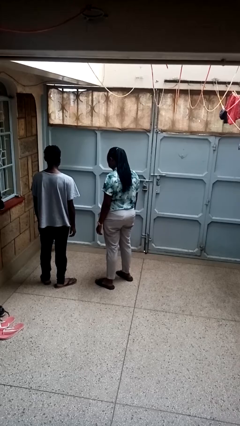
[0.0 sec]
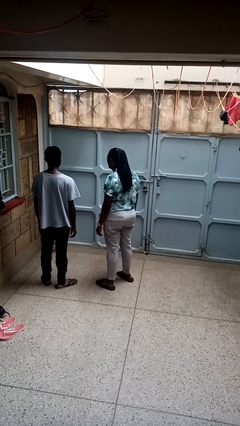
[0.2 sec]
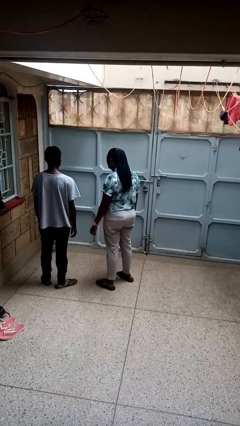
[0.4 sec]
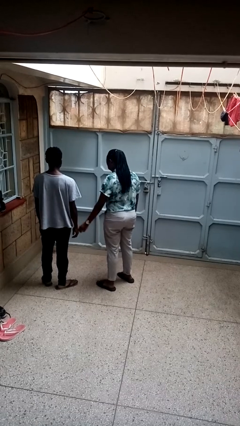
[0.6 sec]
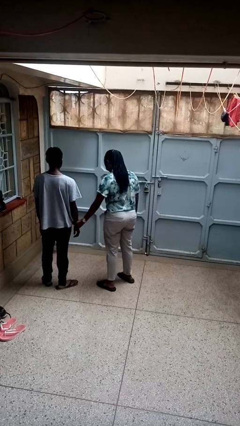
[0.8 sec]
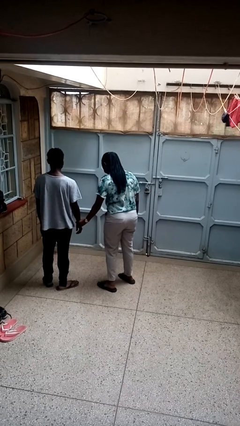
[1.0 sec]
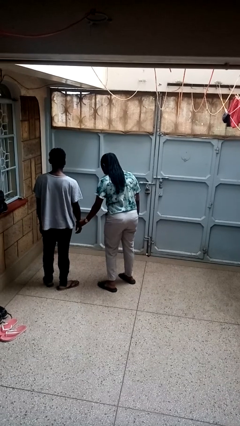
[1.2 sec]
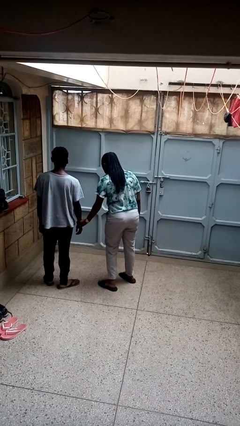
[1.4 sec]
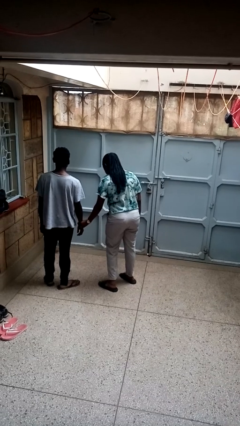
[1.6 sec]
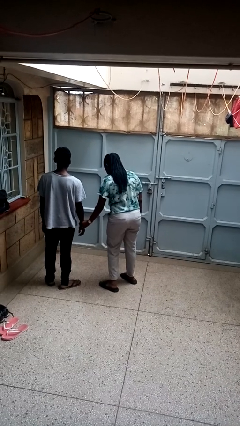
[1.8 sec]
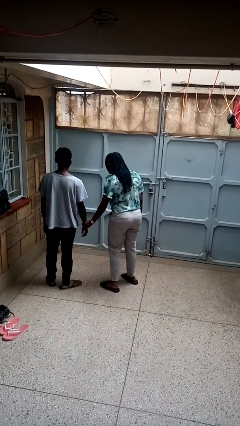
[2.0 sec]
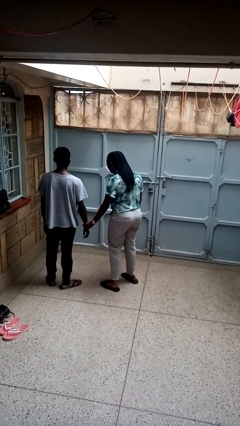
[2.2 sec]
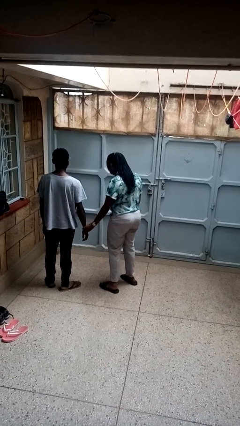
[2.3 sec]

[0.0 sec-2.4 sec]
person grabs person by forearm

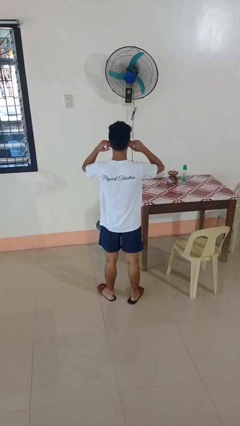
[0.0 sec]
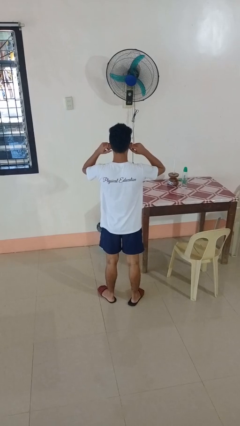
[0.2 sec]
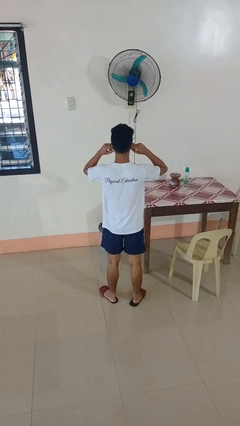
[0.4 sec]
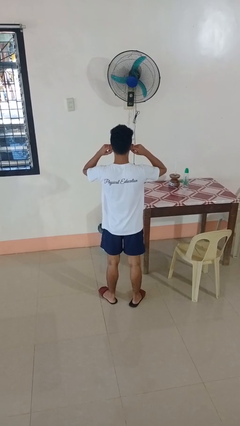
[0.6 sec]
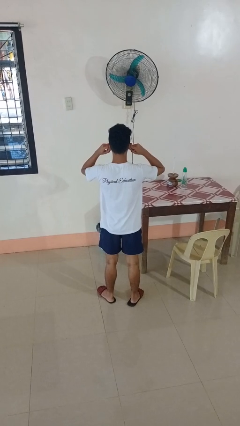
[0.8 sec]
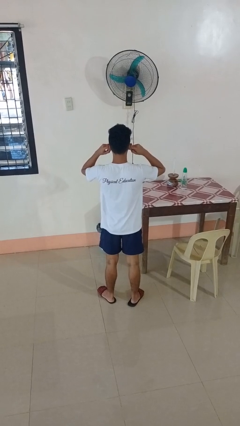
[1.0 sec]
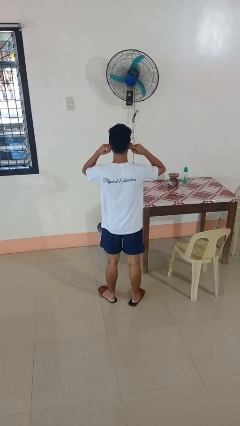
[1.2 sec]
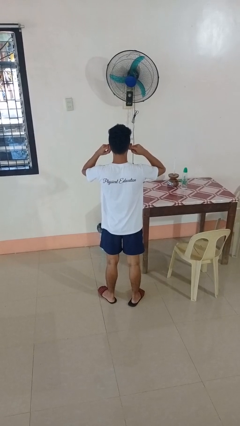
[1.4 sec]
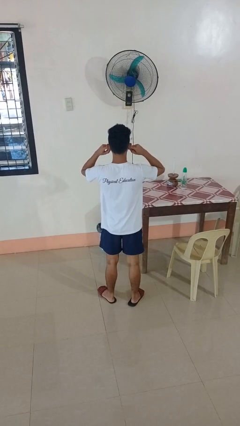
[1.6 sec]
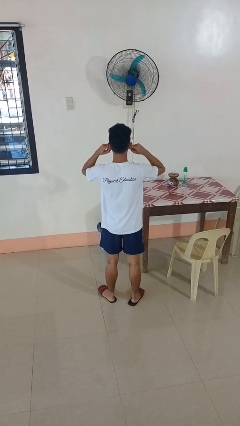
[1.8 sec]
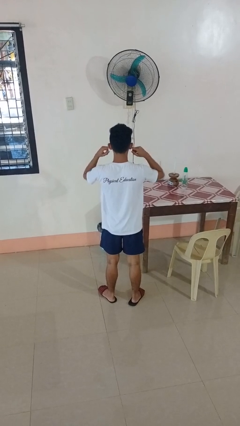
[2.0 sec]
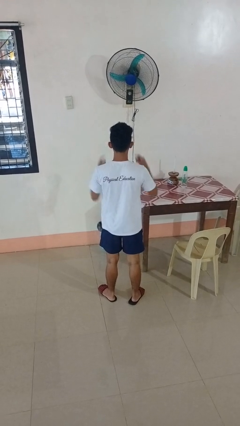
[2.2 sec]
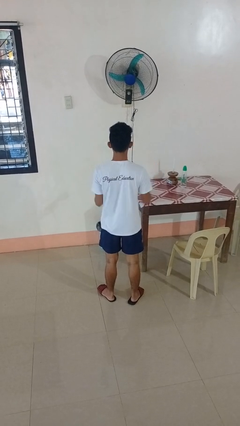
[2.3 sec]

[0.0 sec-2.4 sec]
person puts fingers in ear

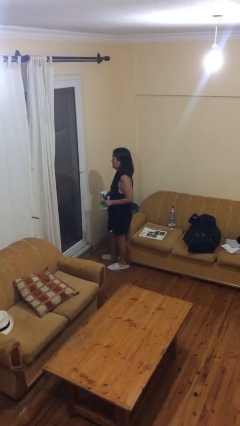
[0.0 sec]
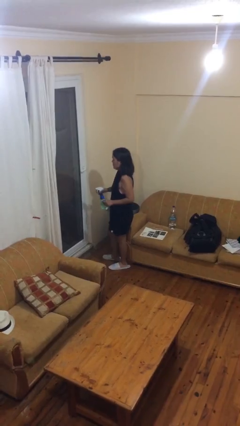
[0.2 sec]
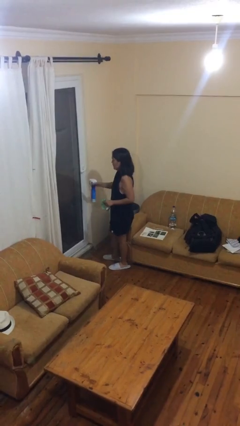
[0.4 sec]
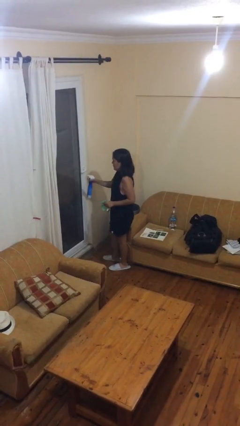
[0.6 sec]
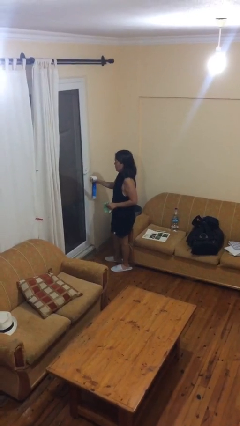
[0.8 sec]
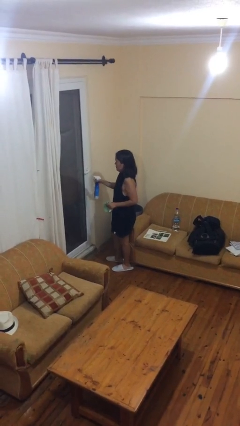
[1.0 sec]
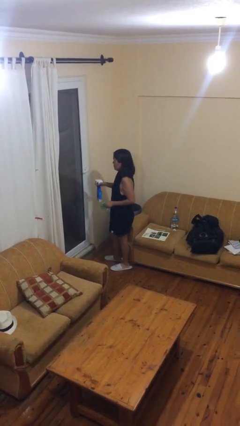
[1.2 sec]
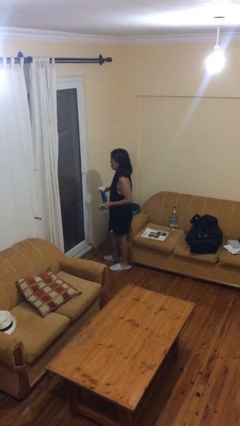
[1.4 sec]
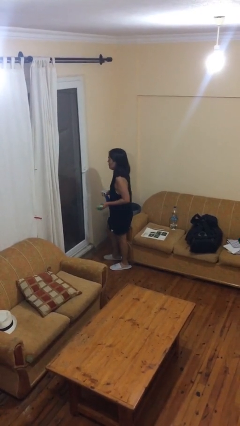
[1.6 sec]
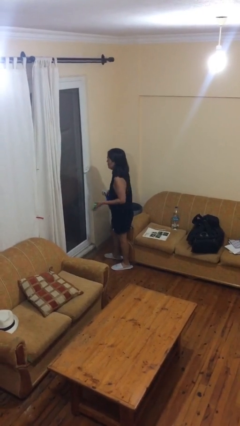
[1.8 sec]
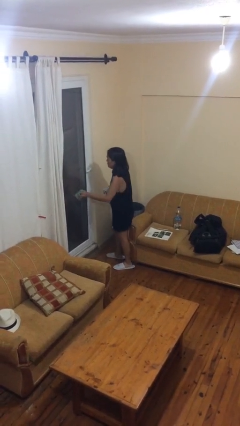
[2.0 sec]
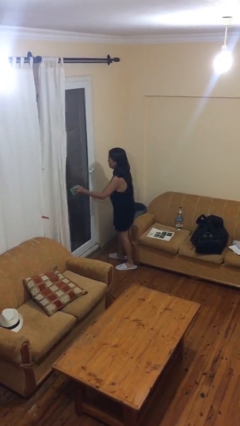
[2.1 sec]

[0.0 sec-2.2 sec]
person sprays from bottle

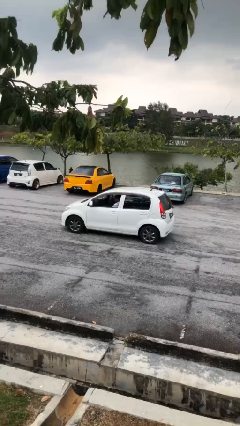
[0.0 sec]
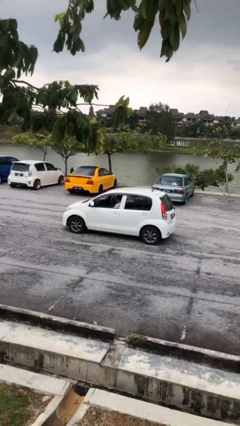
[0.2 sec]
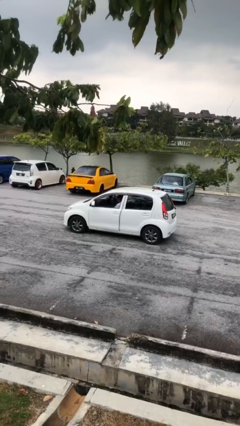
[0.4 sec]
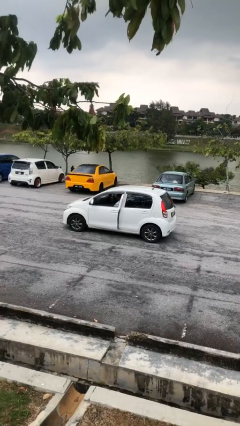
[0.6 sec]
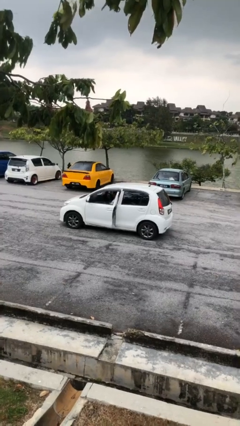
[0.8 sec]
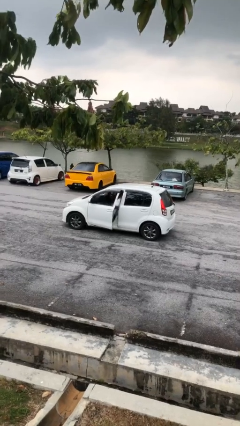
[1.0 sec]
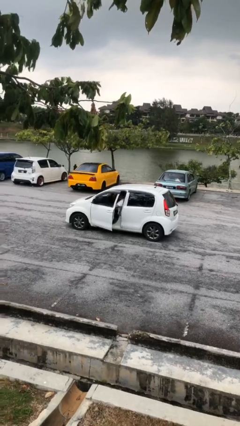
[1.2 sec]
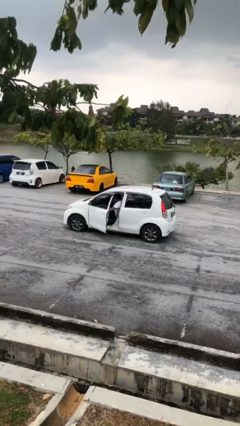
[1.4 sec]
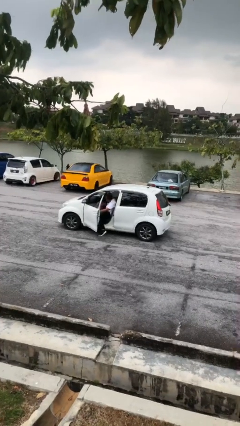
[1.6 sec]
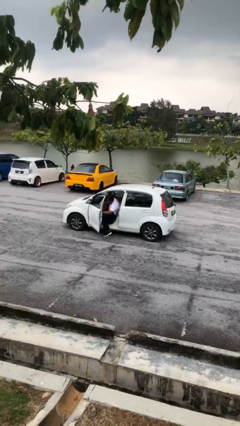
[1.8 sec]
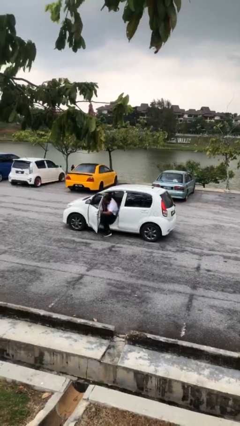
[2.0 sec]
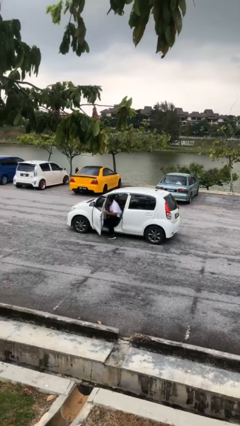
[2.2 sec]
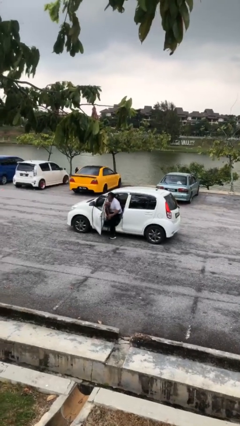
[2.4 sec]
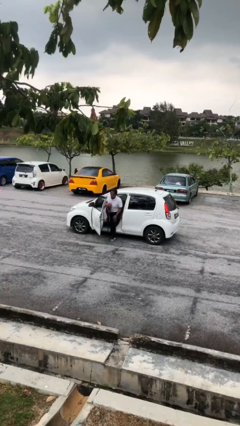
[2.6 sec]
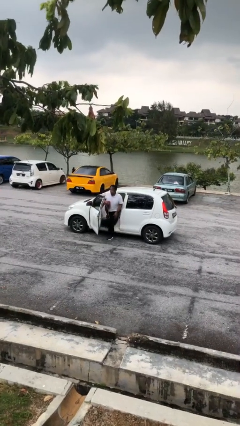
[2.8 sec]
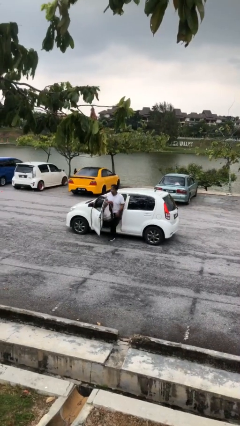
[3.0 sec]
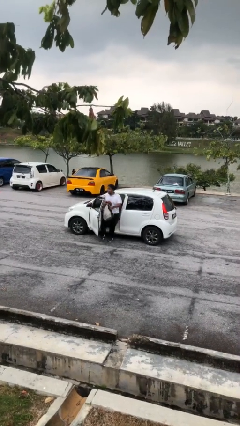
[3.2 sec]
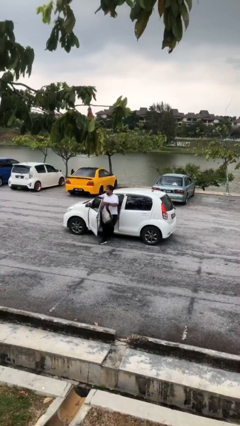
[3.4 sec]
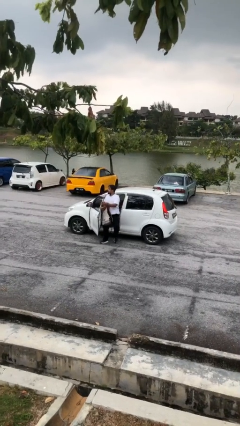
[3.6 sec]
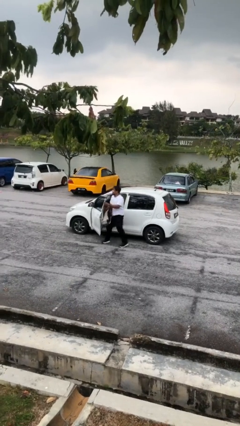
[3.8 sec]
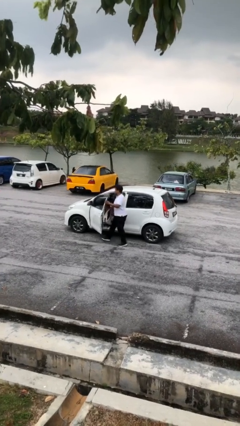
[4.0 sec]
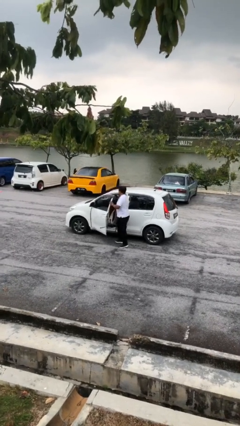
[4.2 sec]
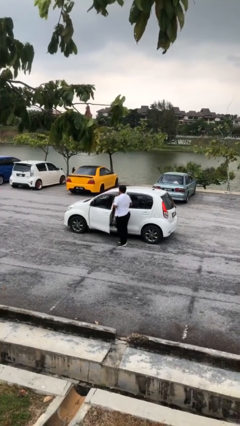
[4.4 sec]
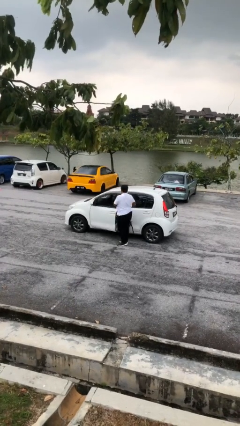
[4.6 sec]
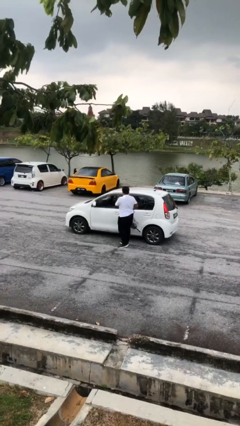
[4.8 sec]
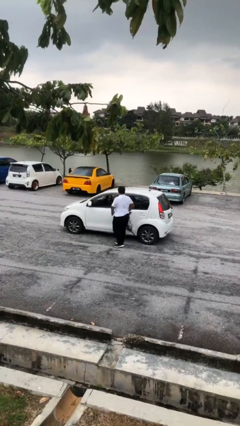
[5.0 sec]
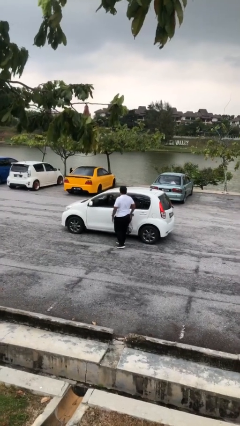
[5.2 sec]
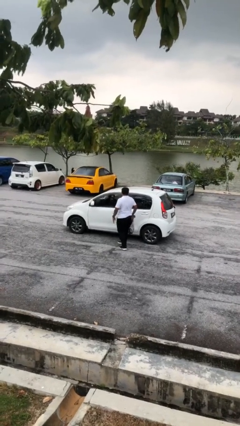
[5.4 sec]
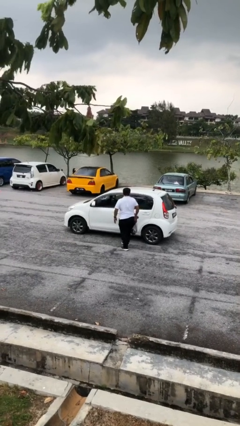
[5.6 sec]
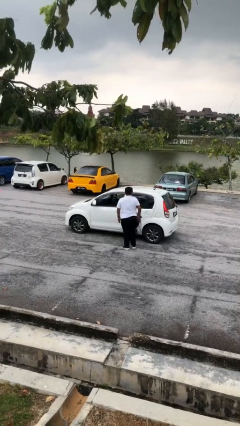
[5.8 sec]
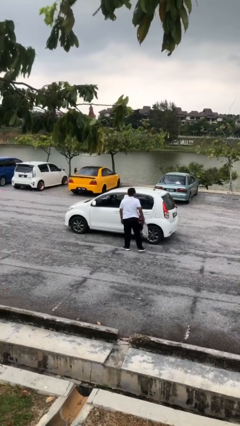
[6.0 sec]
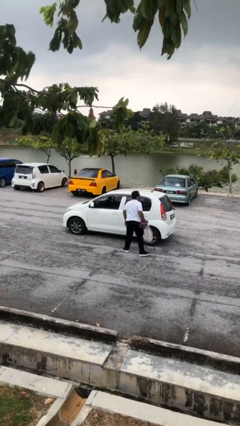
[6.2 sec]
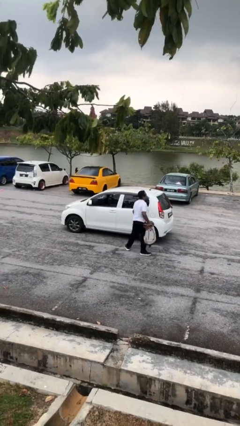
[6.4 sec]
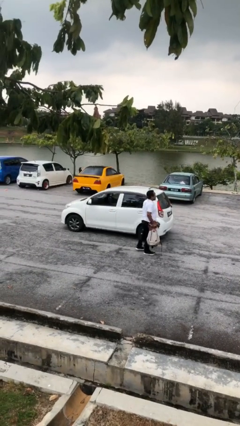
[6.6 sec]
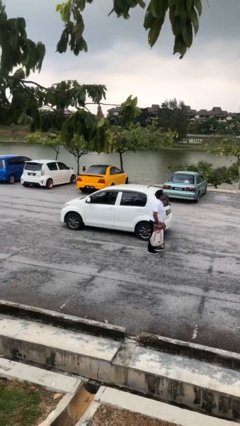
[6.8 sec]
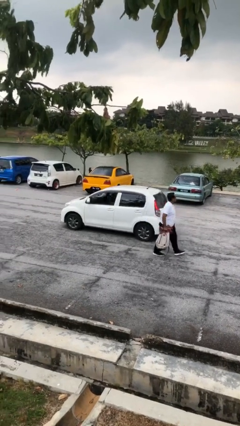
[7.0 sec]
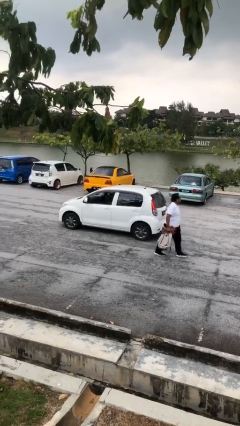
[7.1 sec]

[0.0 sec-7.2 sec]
car drops off person

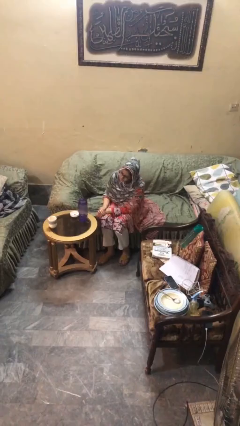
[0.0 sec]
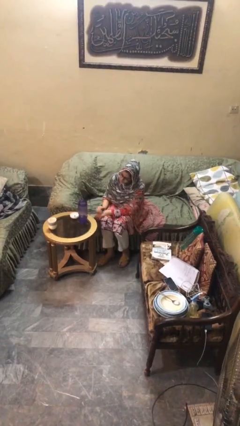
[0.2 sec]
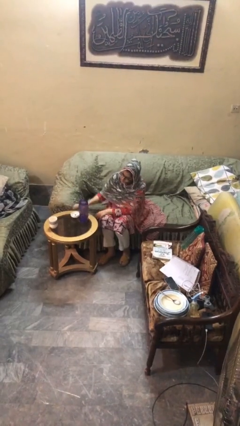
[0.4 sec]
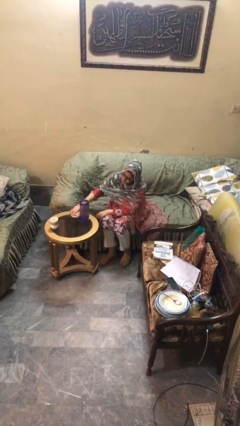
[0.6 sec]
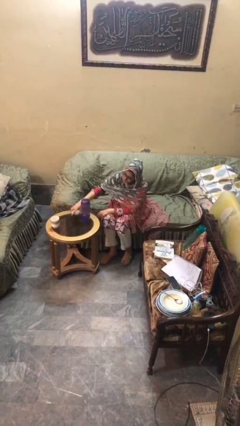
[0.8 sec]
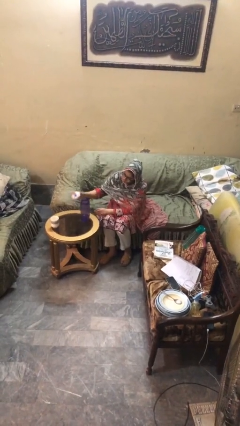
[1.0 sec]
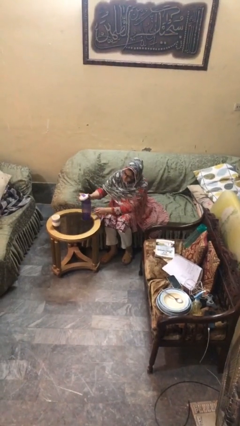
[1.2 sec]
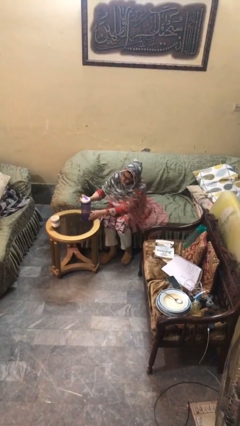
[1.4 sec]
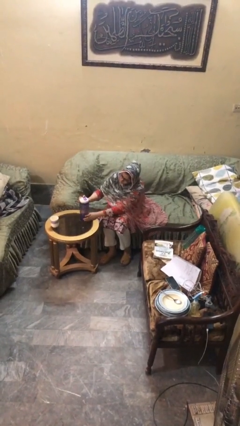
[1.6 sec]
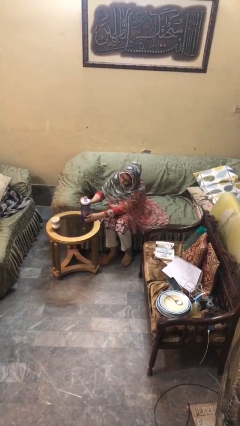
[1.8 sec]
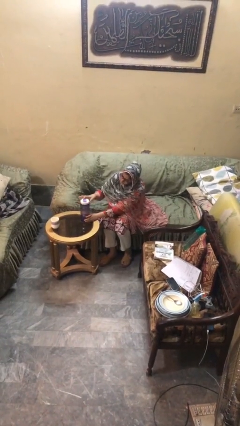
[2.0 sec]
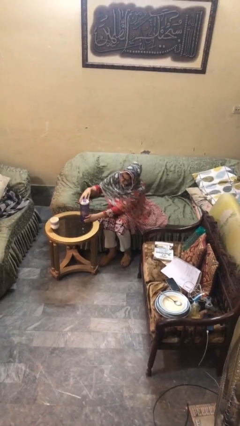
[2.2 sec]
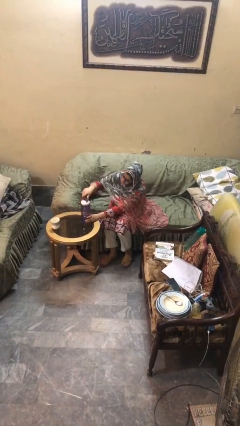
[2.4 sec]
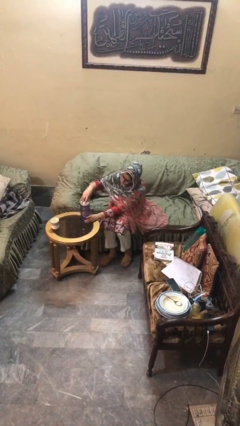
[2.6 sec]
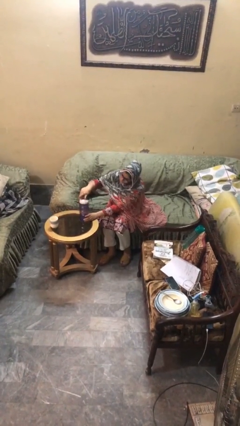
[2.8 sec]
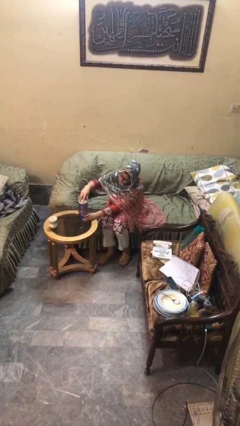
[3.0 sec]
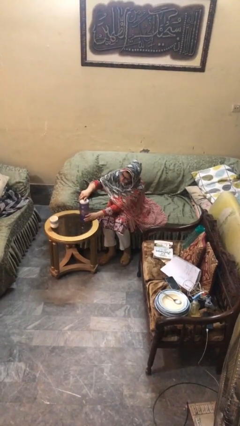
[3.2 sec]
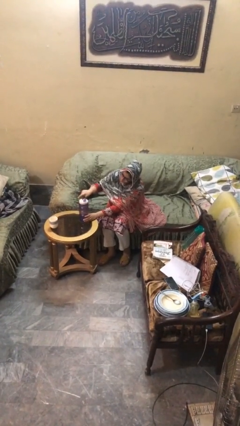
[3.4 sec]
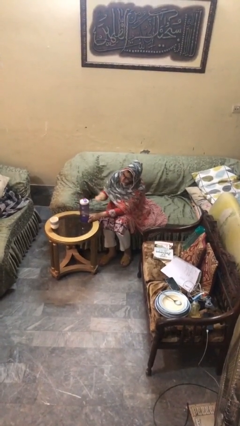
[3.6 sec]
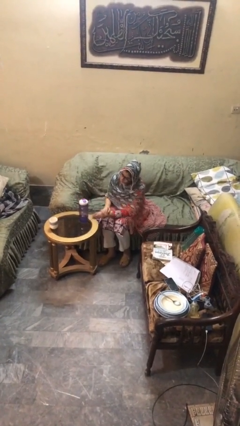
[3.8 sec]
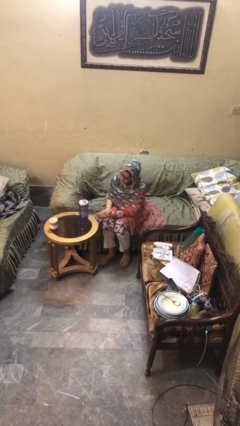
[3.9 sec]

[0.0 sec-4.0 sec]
person screws lid to bottle
